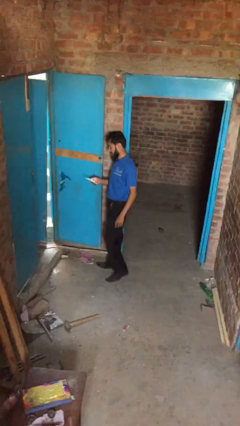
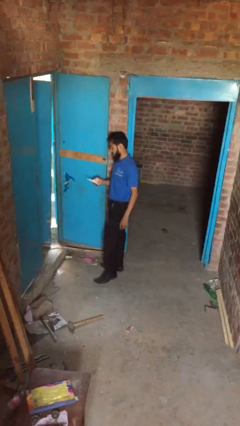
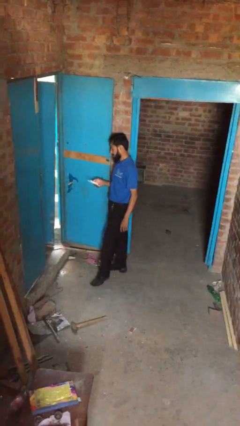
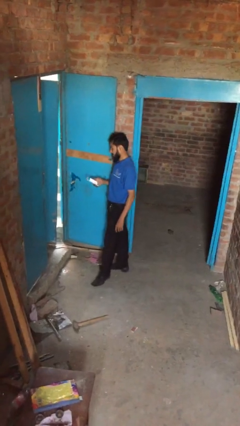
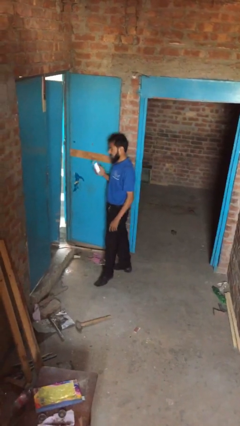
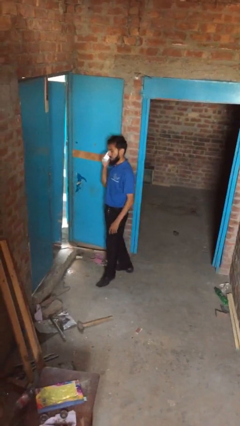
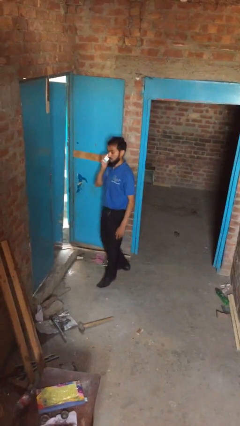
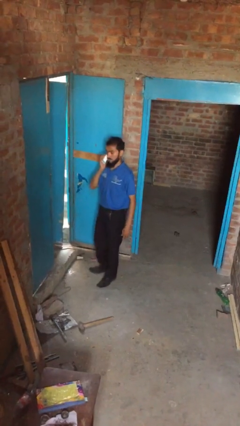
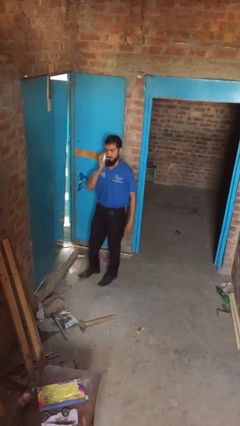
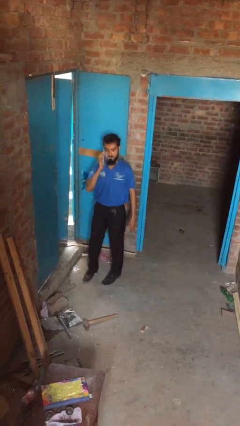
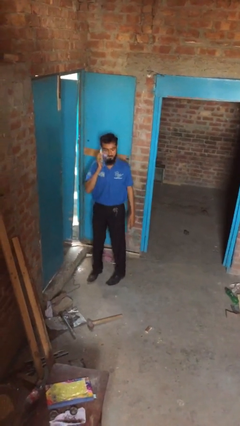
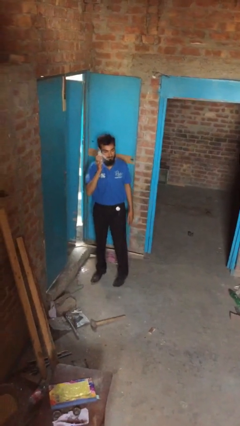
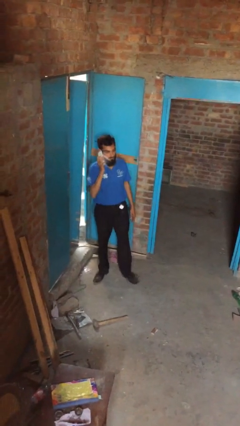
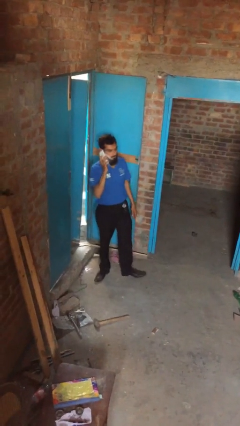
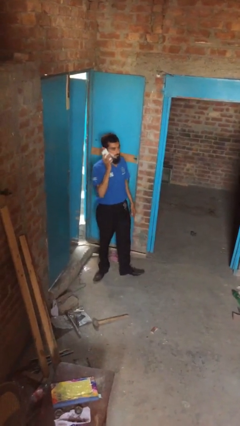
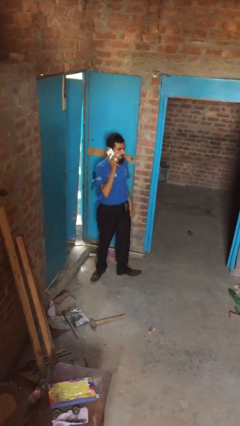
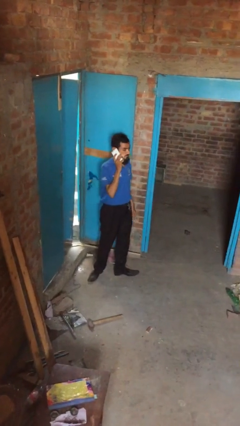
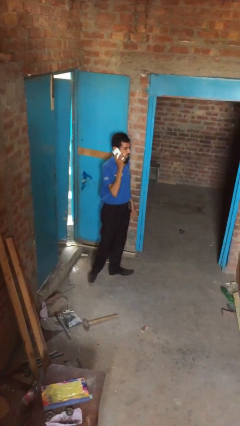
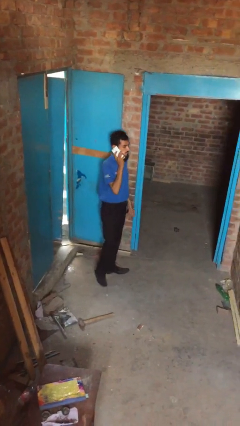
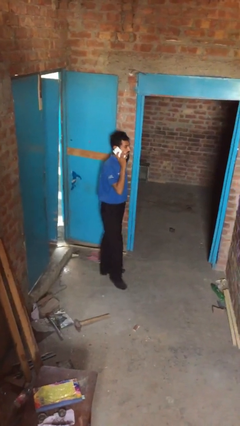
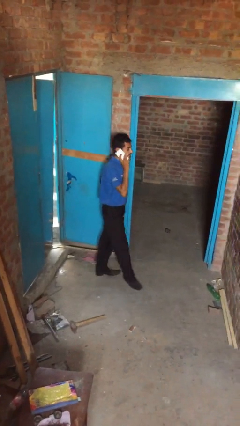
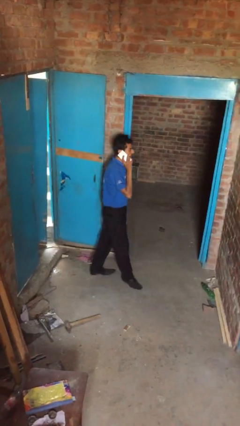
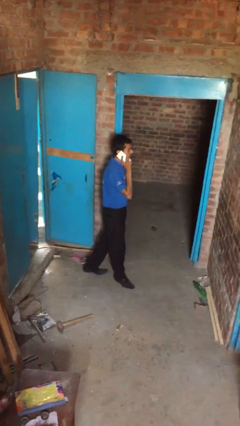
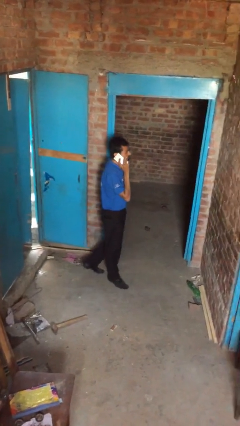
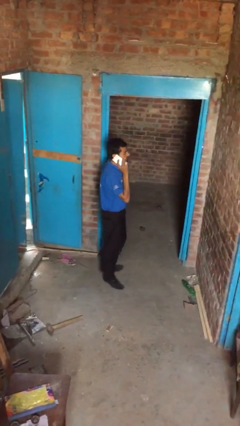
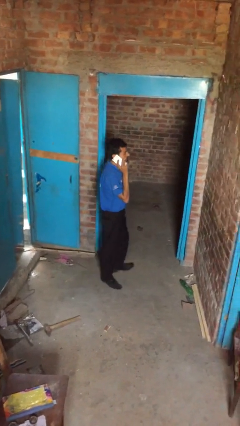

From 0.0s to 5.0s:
person talks on phone

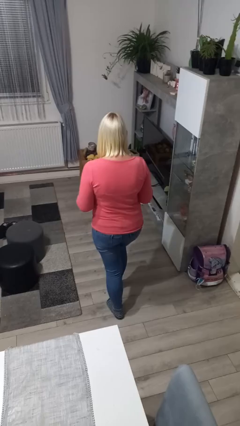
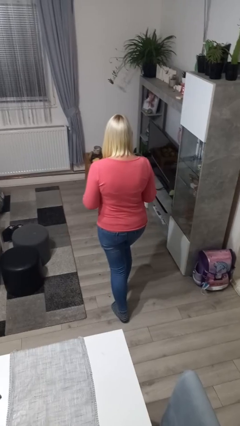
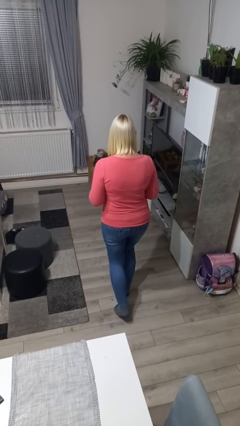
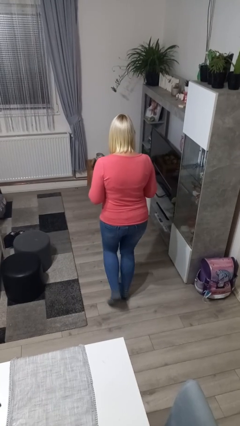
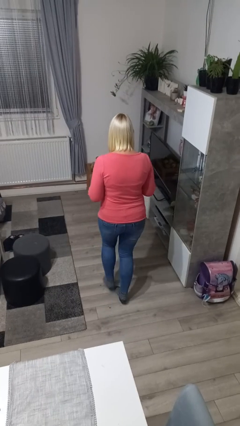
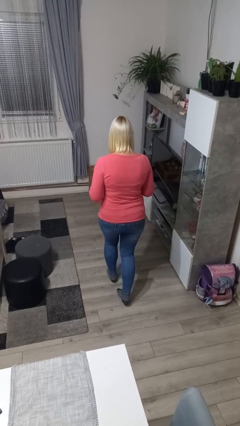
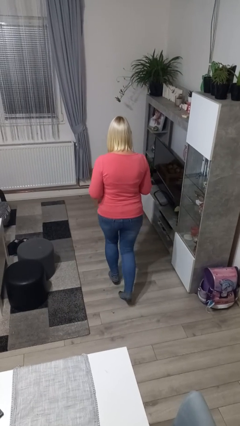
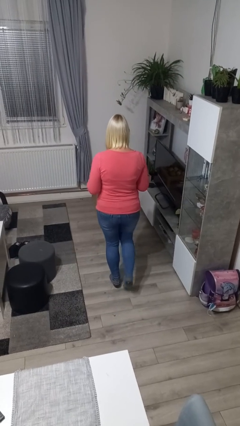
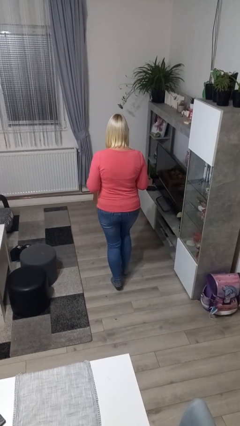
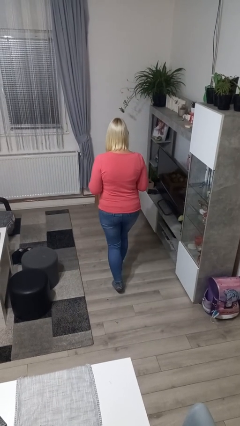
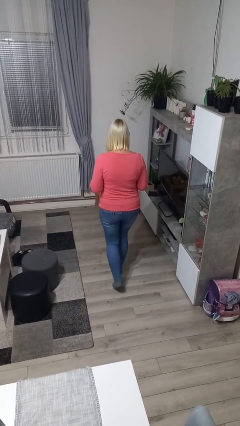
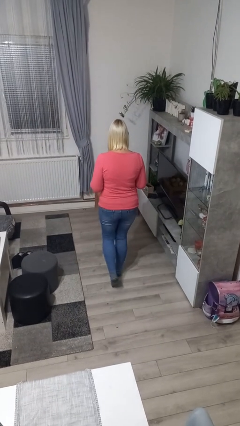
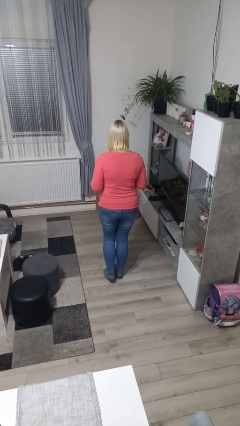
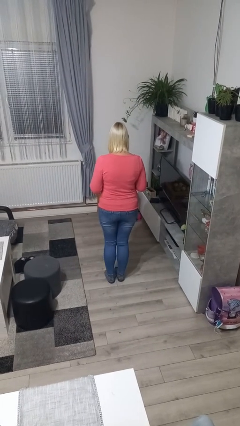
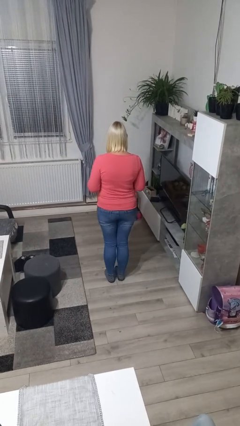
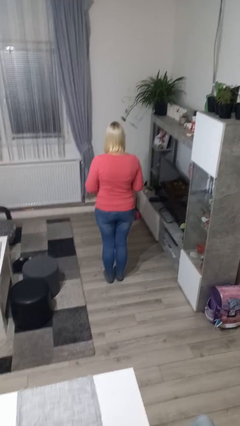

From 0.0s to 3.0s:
person walks tiptoe

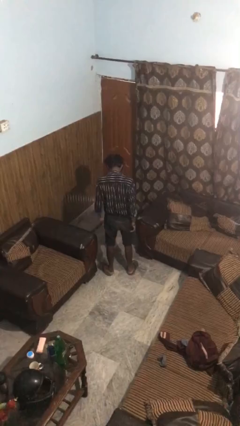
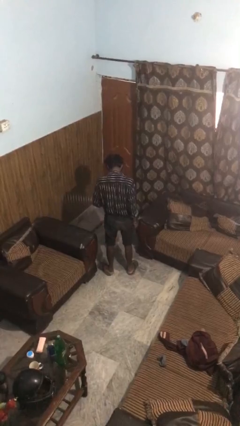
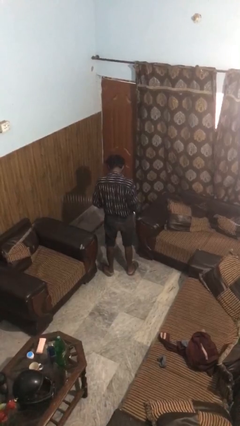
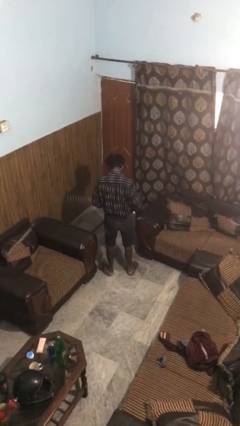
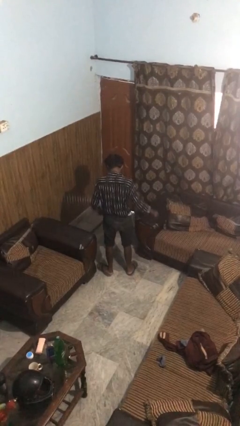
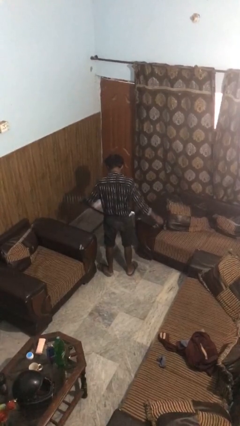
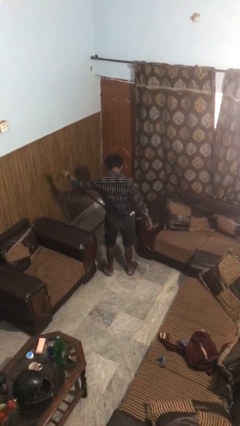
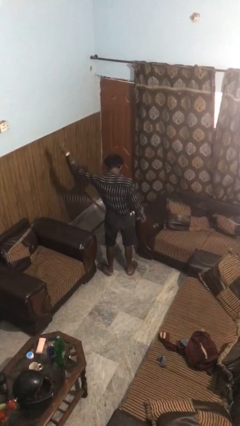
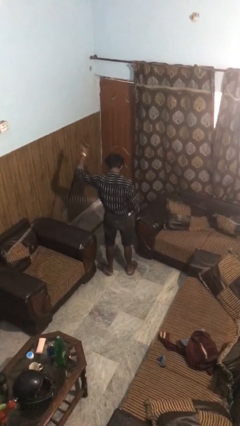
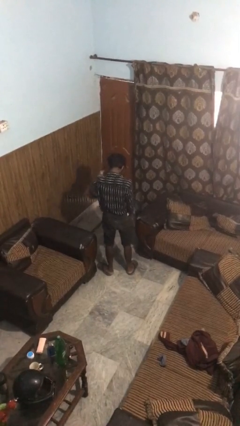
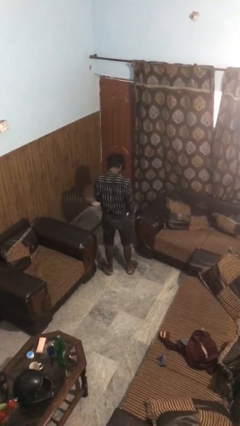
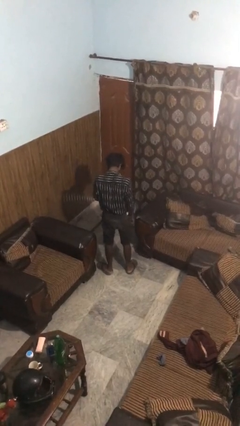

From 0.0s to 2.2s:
person takes off belt

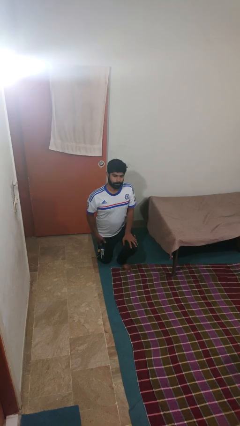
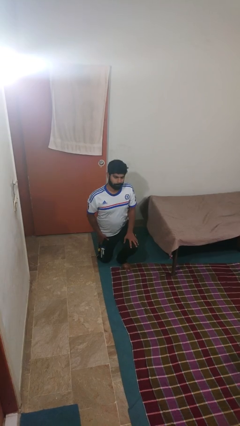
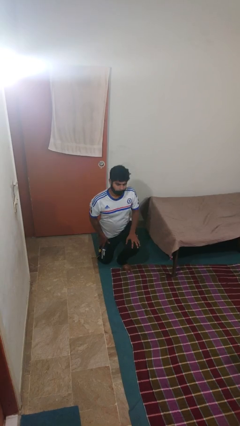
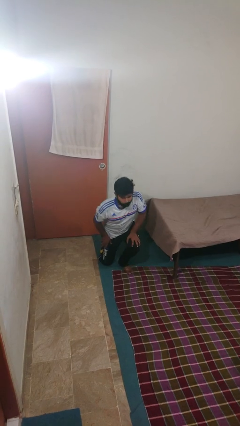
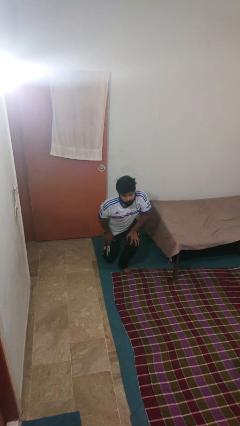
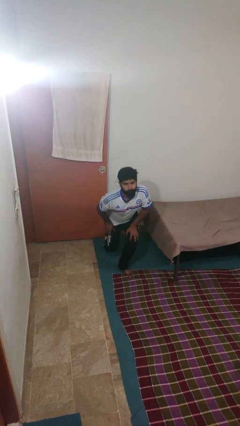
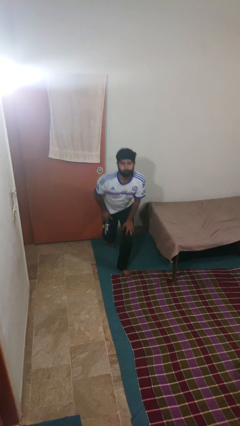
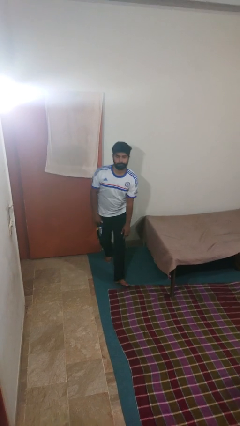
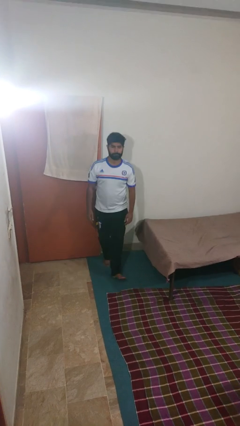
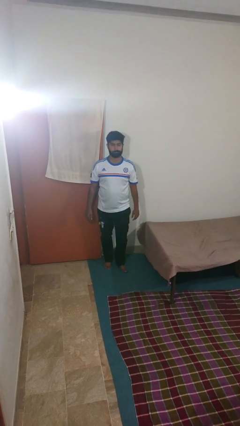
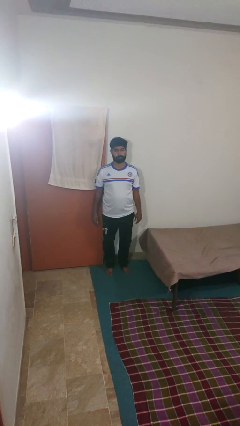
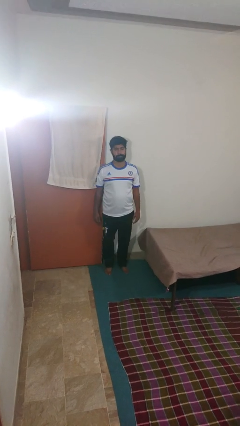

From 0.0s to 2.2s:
person stands up from floor

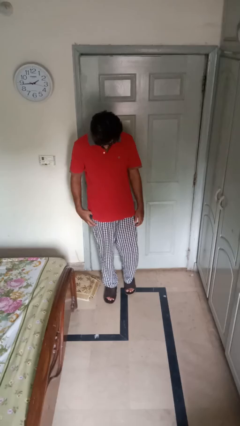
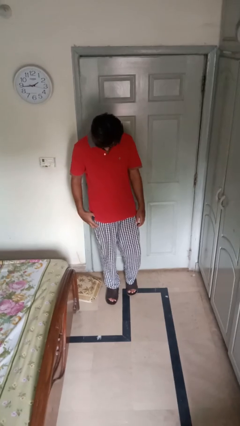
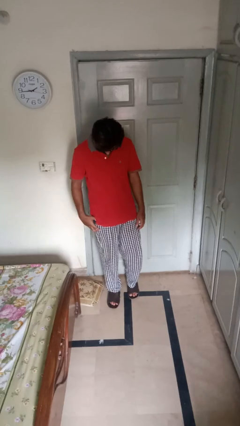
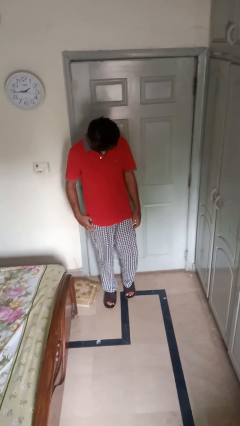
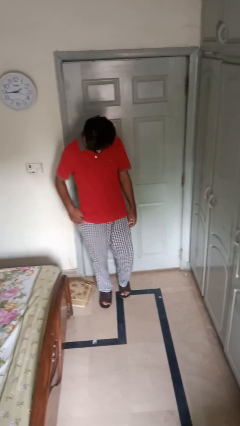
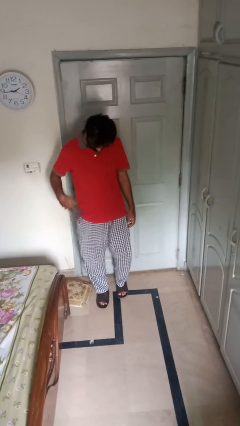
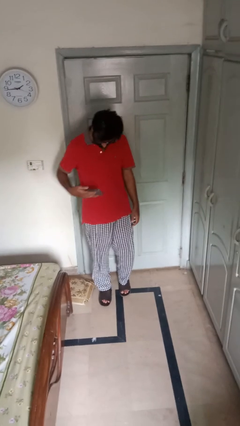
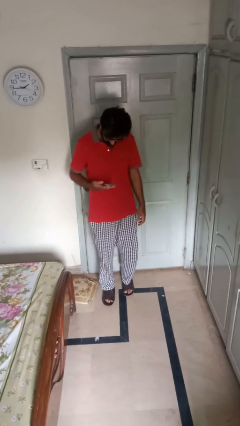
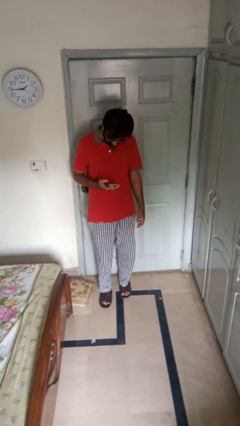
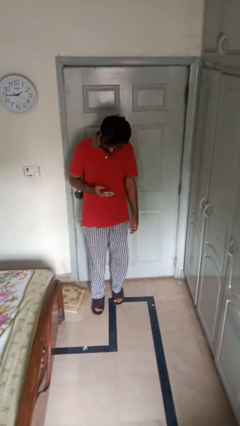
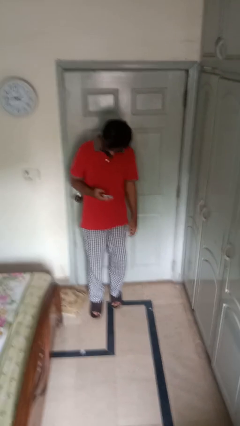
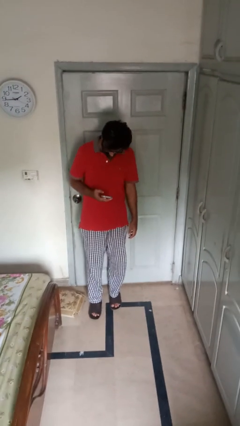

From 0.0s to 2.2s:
person takes phone from pocket

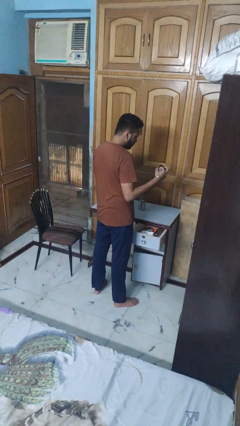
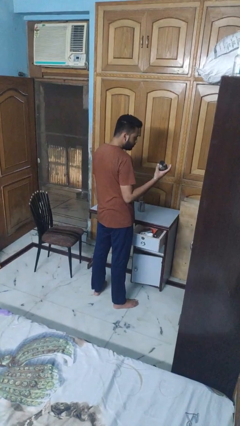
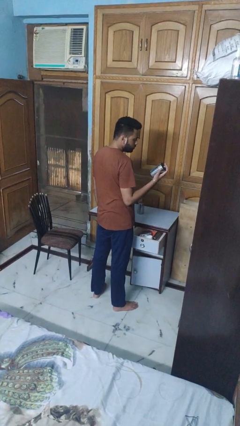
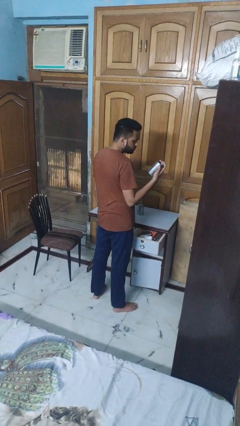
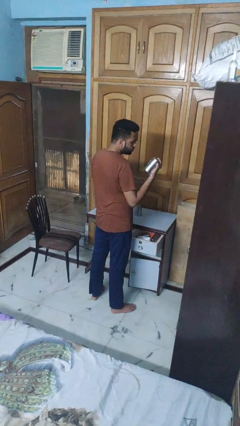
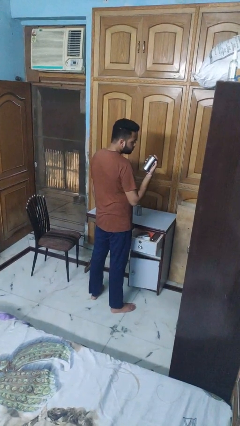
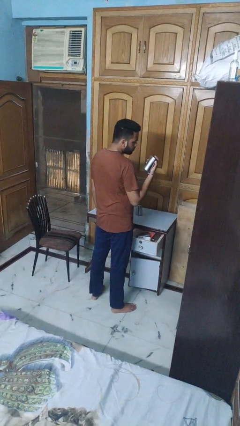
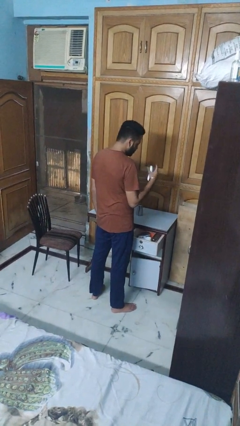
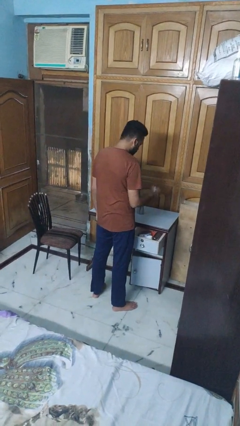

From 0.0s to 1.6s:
person takes object from kitchen drawer

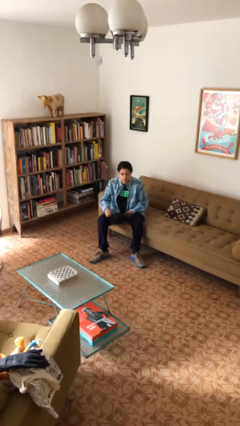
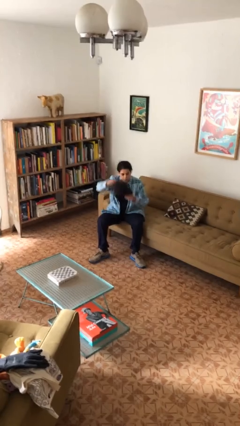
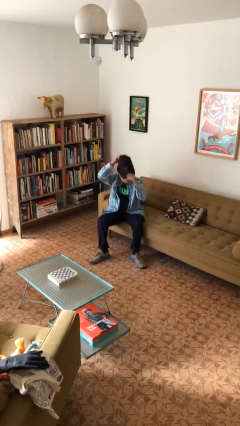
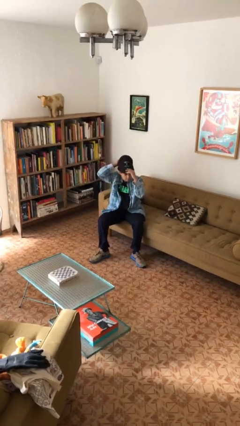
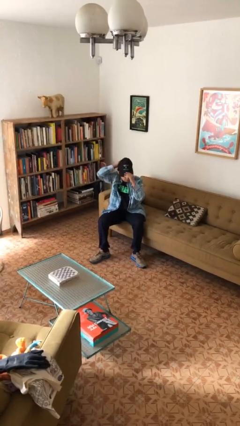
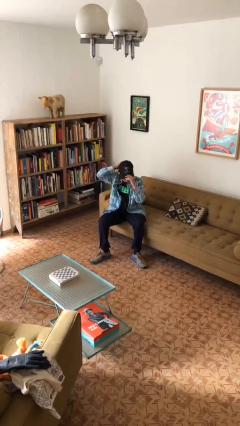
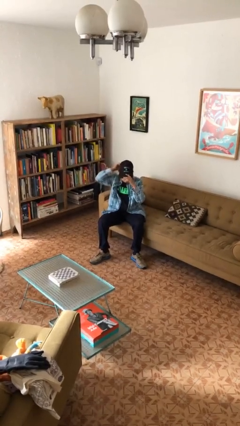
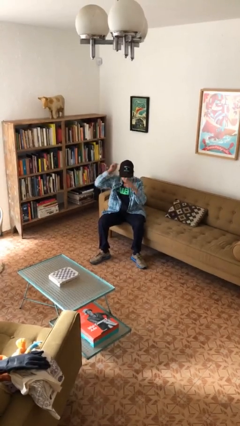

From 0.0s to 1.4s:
person puts on hat
